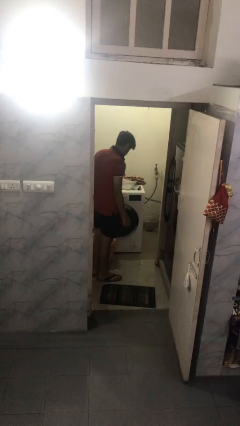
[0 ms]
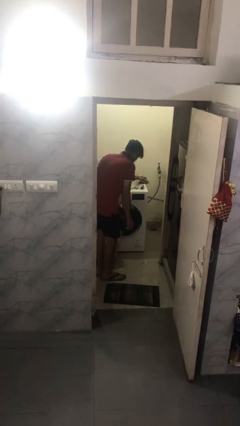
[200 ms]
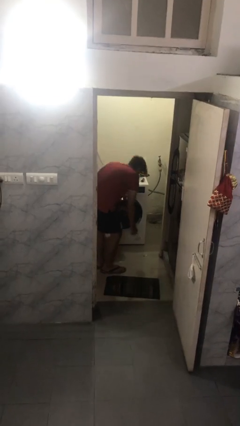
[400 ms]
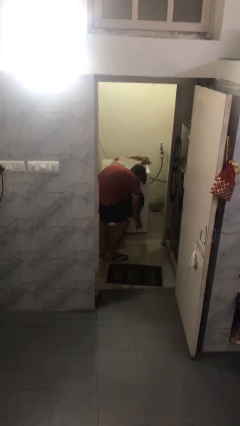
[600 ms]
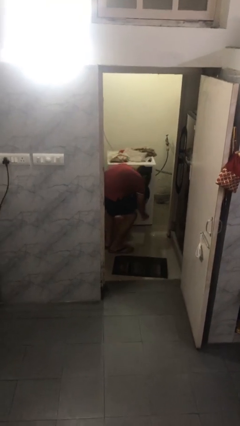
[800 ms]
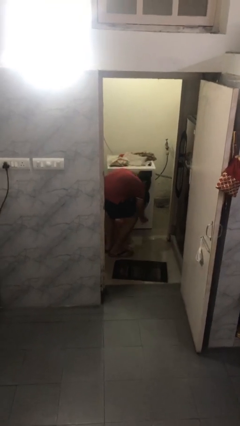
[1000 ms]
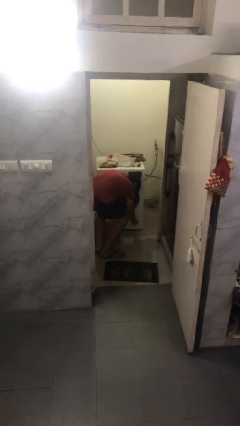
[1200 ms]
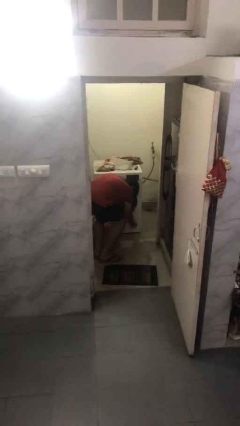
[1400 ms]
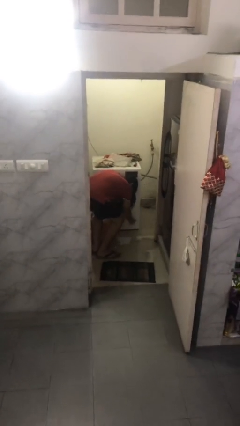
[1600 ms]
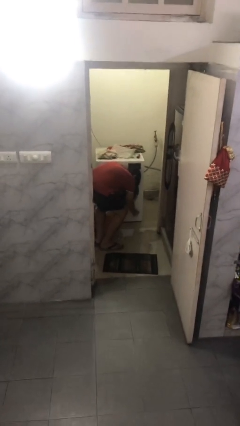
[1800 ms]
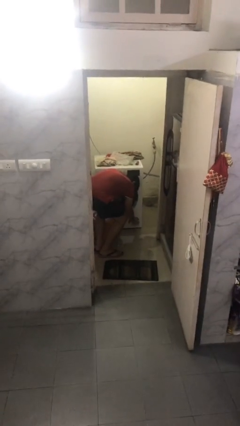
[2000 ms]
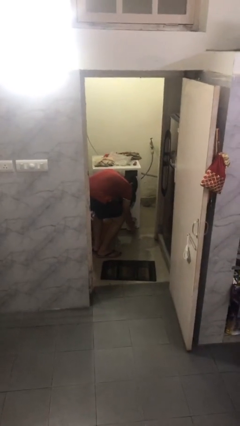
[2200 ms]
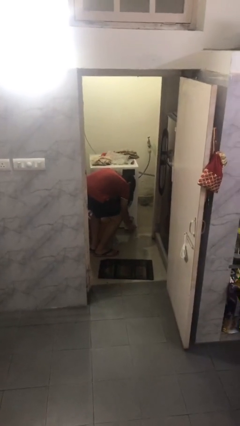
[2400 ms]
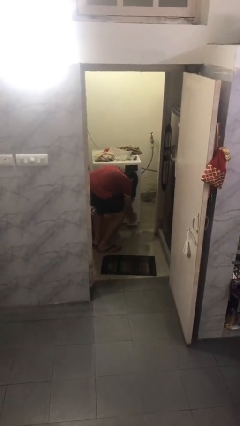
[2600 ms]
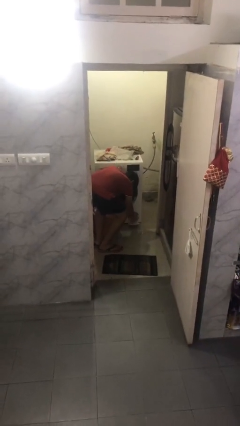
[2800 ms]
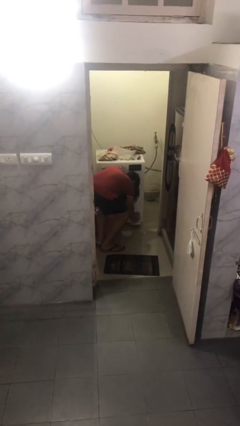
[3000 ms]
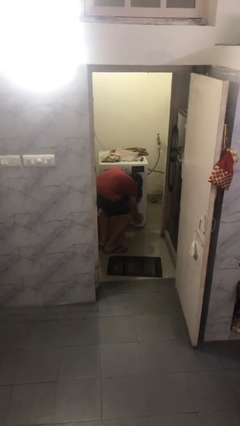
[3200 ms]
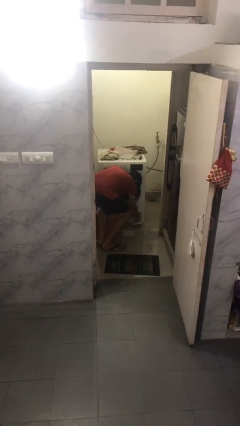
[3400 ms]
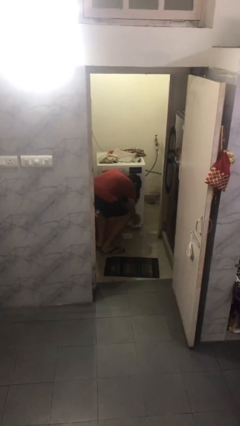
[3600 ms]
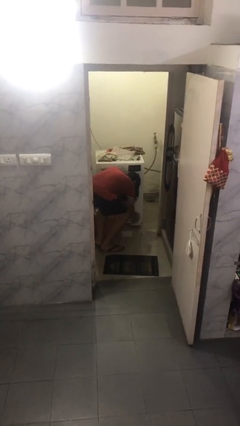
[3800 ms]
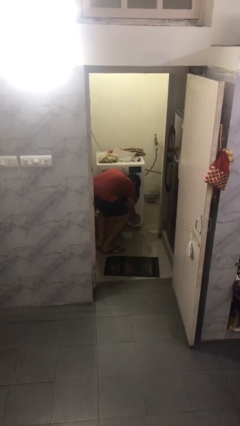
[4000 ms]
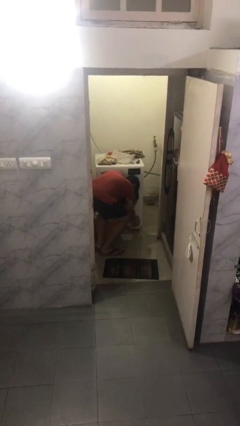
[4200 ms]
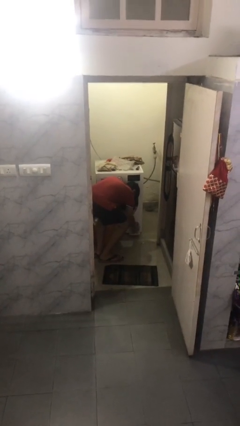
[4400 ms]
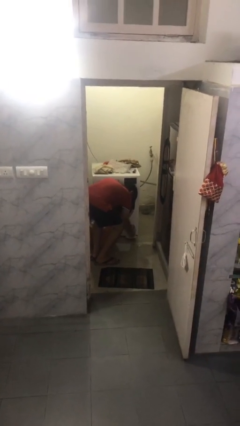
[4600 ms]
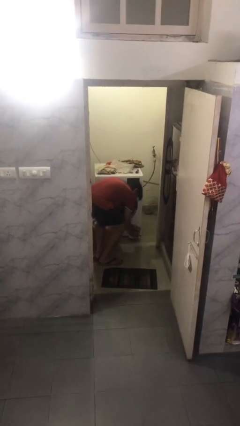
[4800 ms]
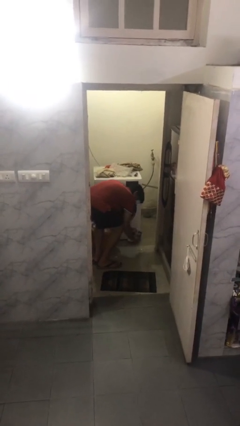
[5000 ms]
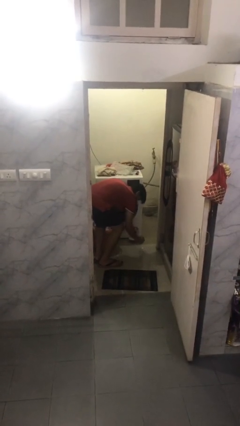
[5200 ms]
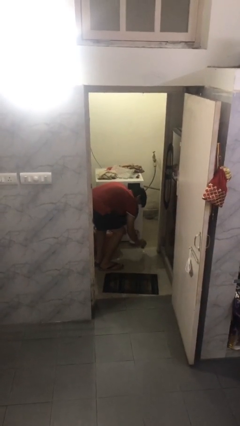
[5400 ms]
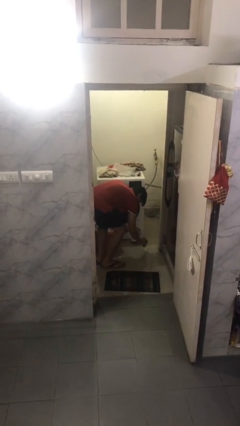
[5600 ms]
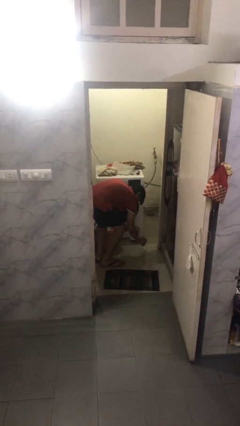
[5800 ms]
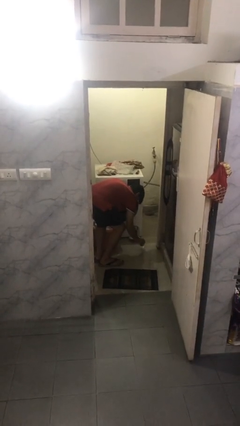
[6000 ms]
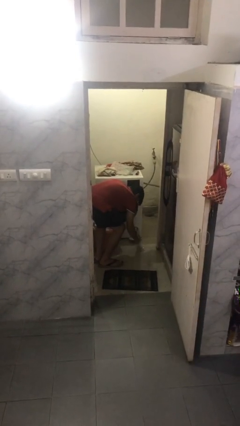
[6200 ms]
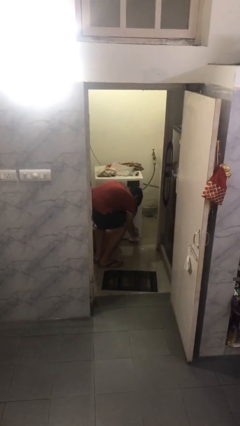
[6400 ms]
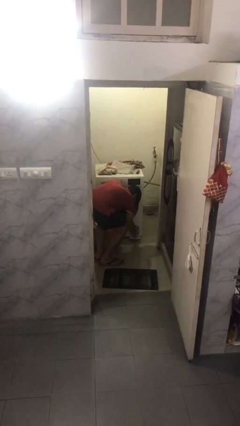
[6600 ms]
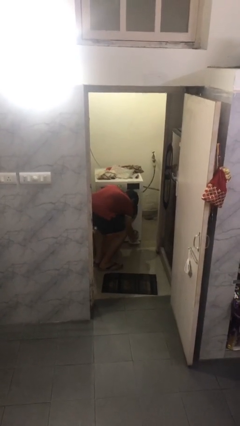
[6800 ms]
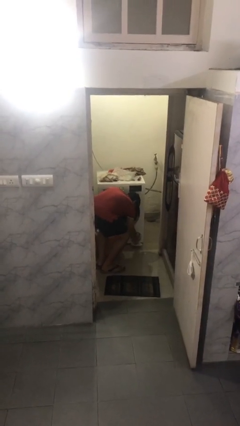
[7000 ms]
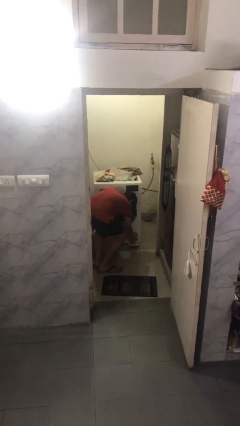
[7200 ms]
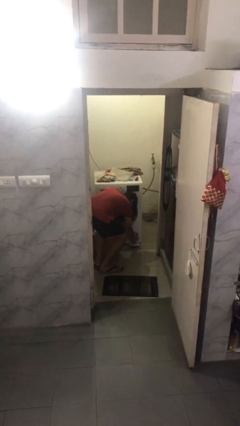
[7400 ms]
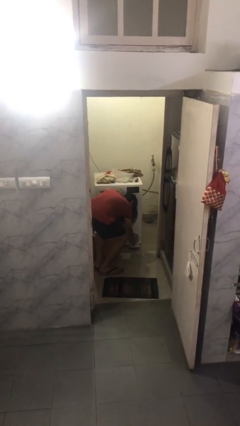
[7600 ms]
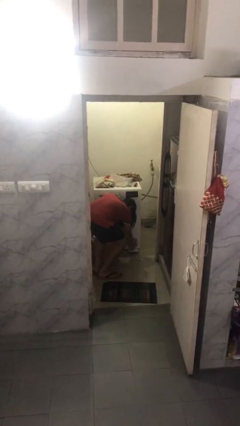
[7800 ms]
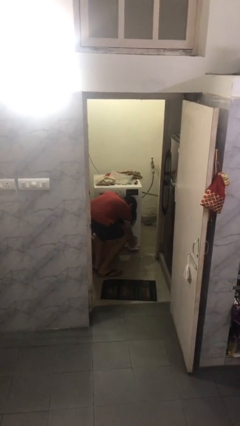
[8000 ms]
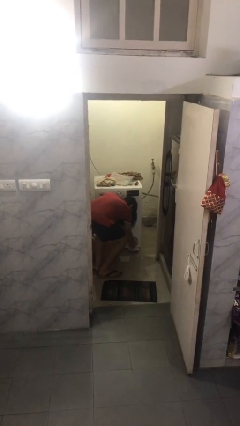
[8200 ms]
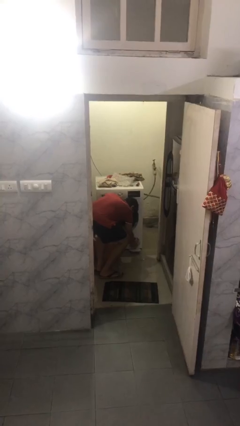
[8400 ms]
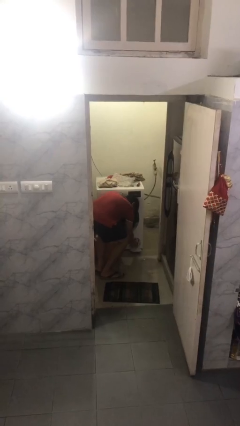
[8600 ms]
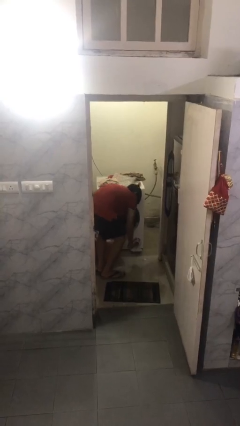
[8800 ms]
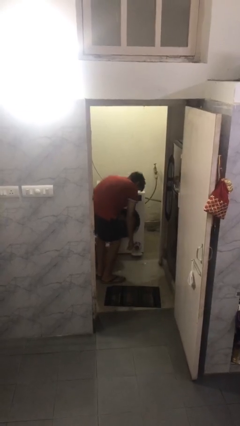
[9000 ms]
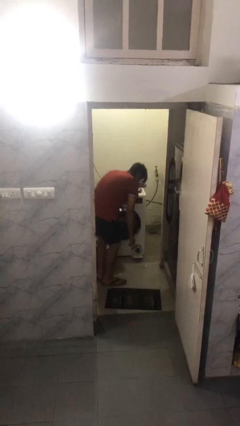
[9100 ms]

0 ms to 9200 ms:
person cleans dryer lint trap

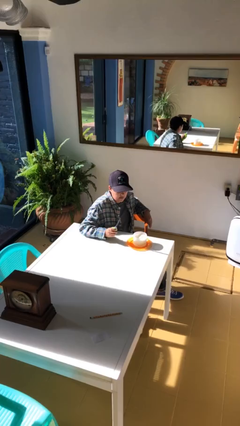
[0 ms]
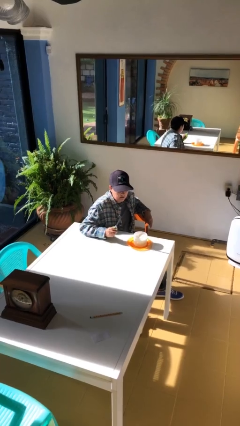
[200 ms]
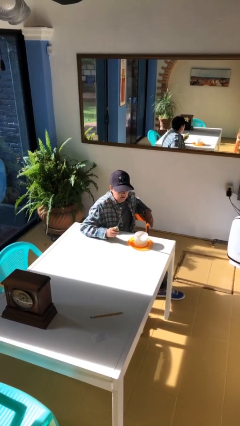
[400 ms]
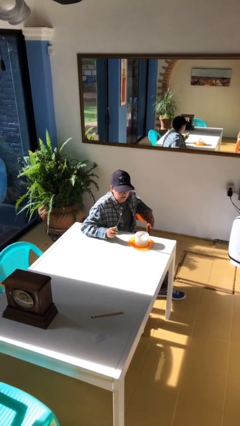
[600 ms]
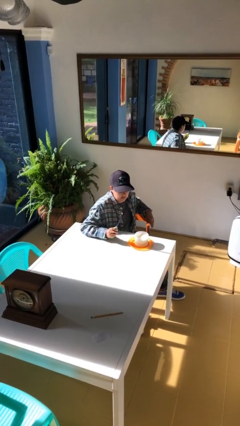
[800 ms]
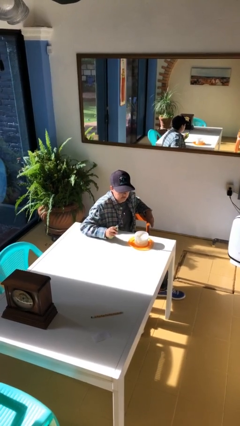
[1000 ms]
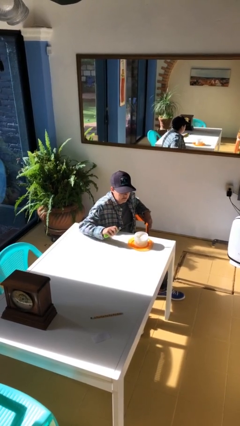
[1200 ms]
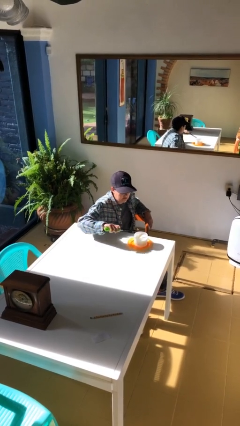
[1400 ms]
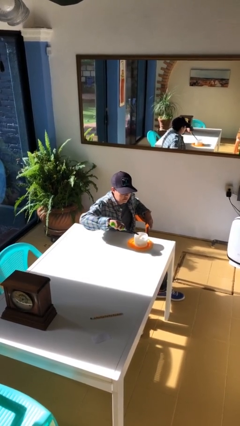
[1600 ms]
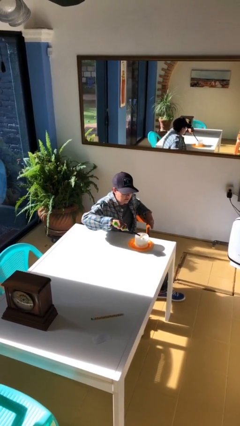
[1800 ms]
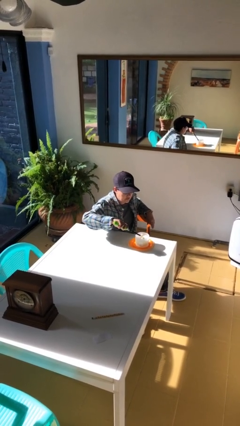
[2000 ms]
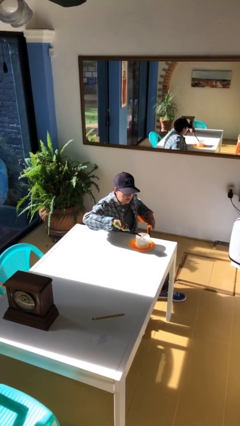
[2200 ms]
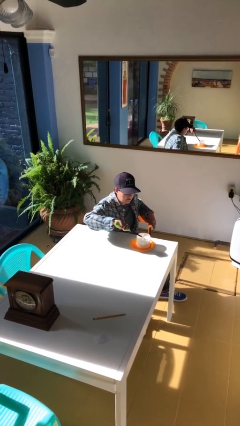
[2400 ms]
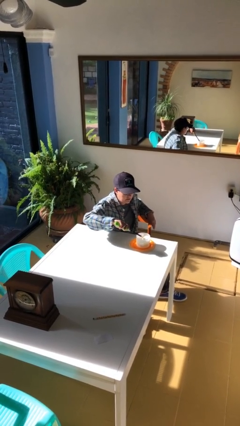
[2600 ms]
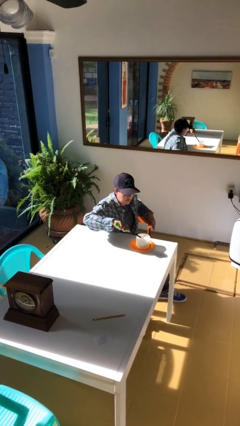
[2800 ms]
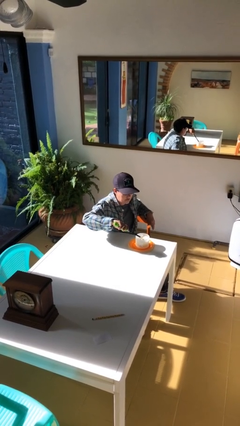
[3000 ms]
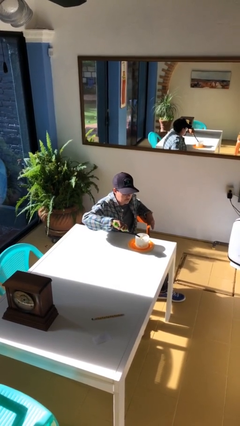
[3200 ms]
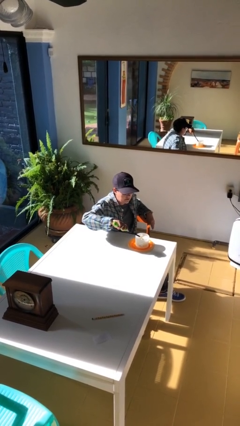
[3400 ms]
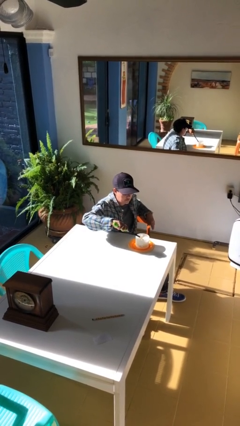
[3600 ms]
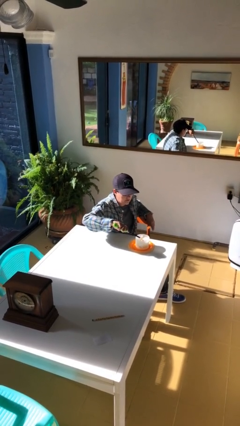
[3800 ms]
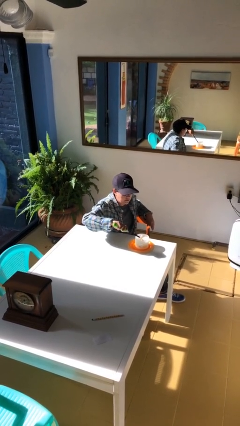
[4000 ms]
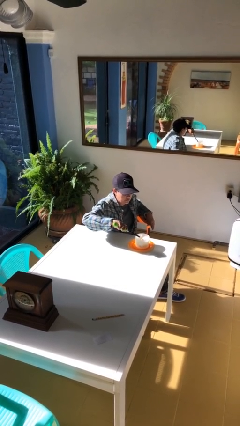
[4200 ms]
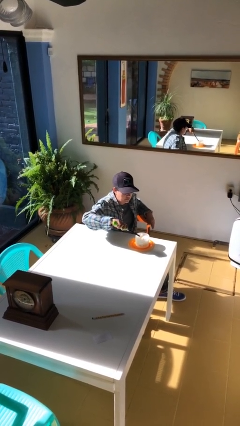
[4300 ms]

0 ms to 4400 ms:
person lights candle

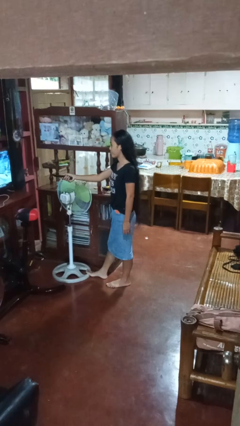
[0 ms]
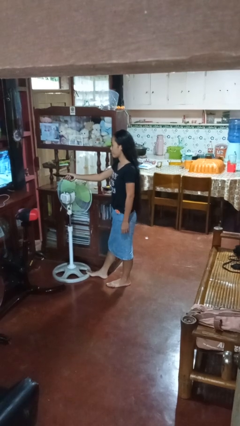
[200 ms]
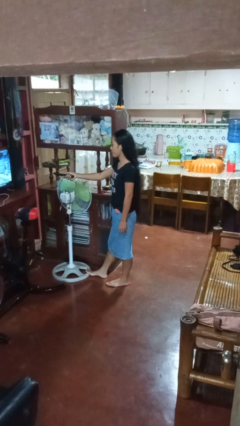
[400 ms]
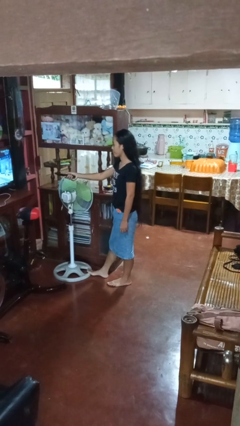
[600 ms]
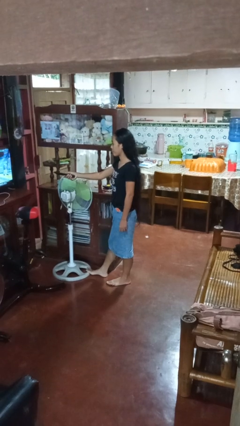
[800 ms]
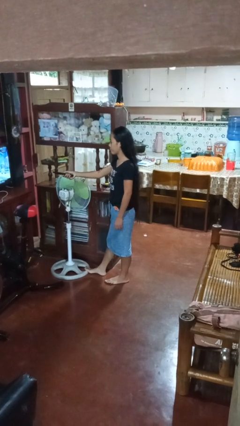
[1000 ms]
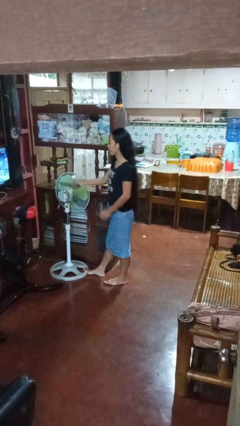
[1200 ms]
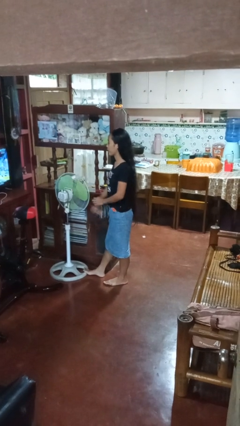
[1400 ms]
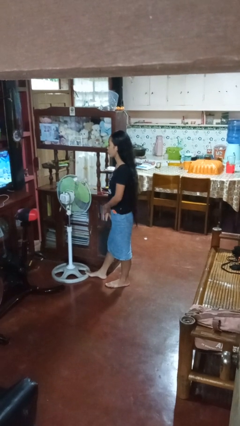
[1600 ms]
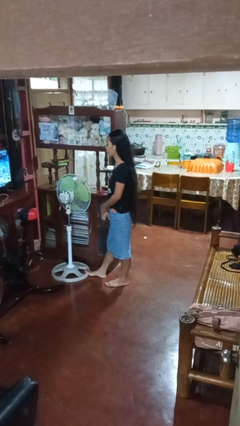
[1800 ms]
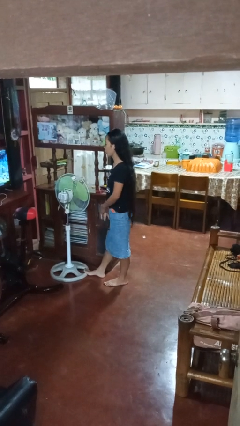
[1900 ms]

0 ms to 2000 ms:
person uses television remote

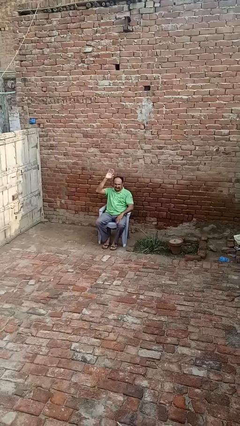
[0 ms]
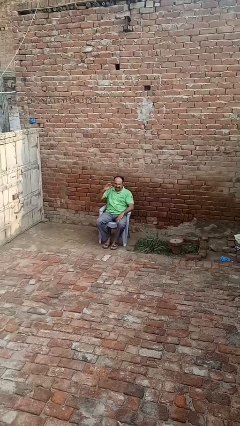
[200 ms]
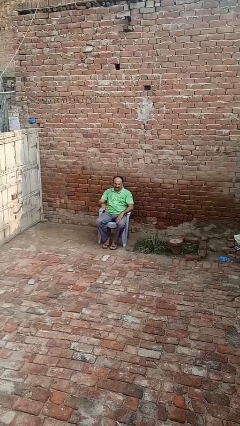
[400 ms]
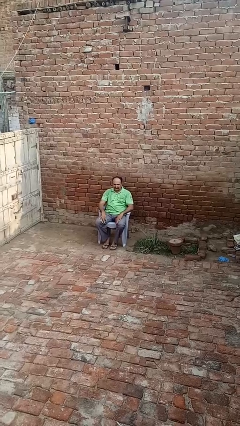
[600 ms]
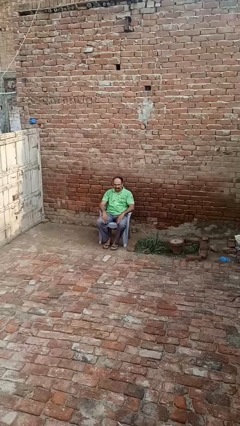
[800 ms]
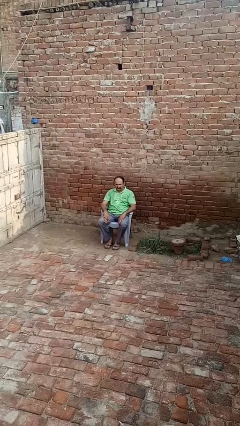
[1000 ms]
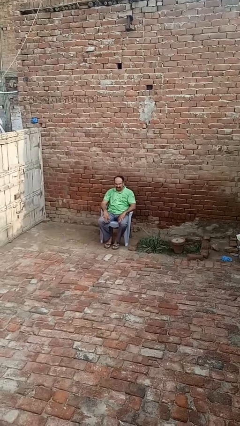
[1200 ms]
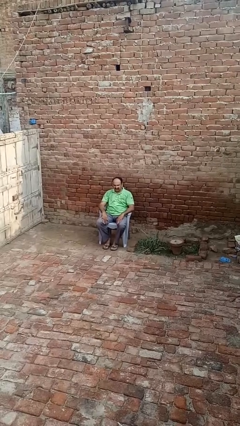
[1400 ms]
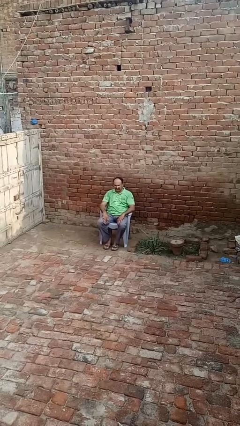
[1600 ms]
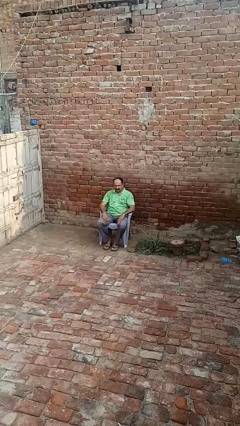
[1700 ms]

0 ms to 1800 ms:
person gestures lower hand

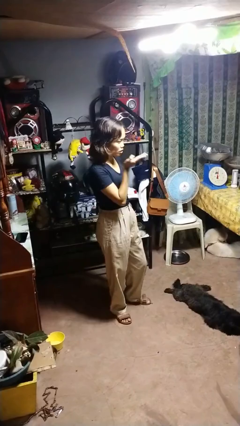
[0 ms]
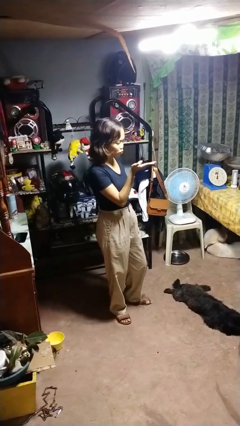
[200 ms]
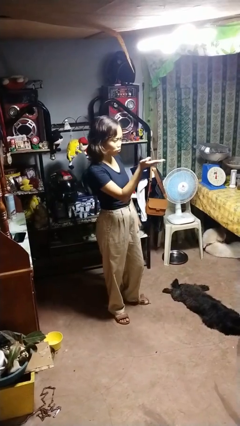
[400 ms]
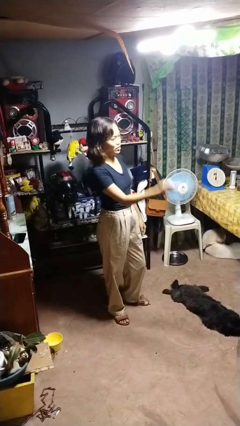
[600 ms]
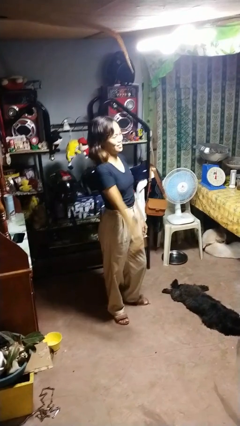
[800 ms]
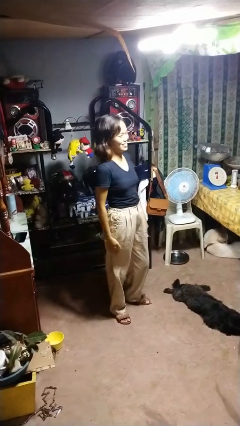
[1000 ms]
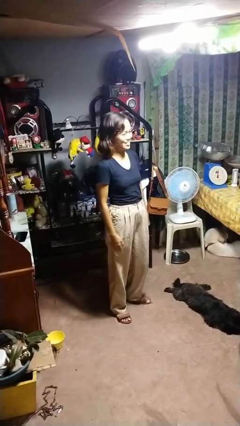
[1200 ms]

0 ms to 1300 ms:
person gestures blow kiss
